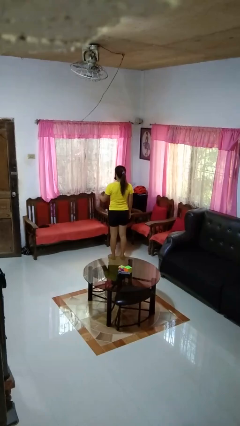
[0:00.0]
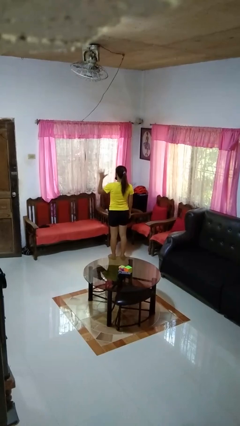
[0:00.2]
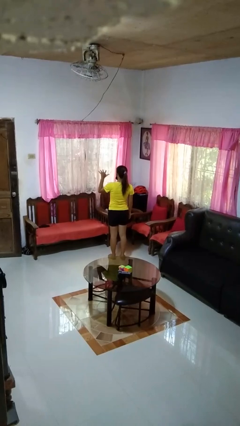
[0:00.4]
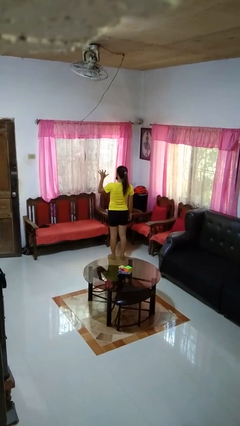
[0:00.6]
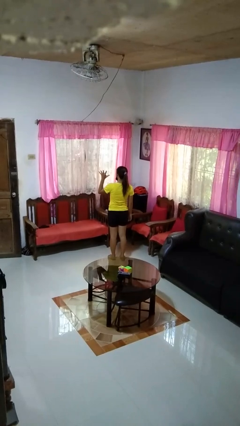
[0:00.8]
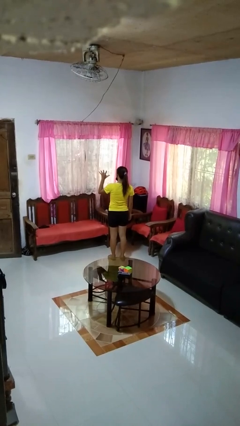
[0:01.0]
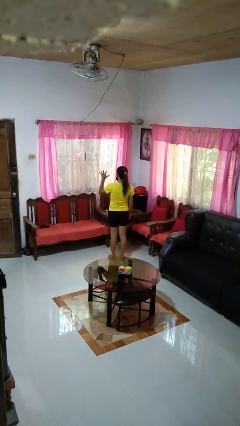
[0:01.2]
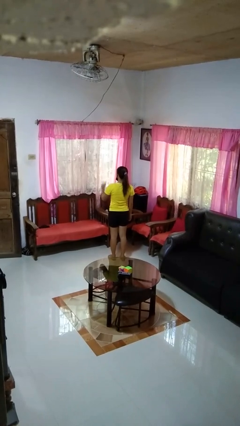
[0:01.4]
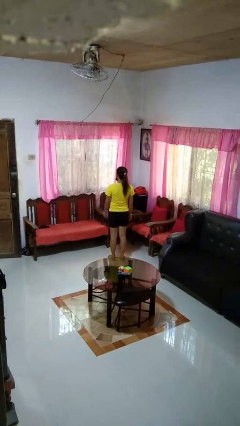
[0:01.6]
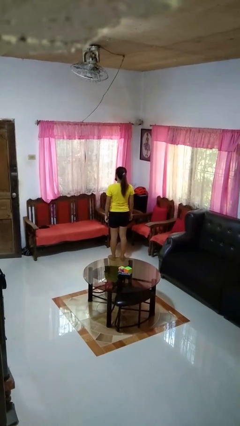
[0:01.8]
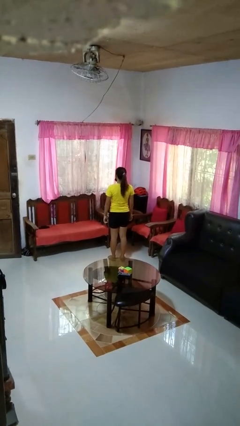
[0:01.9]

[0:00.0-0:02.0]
person gestures number five

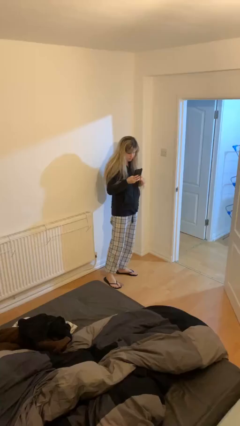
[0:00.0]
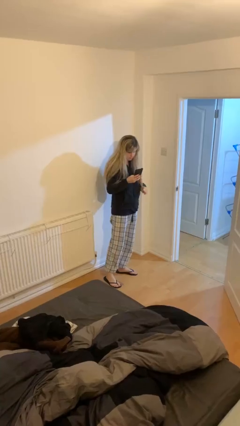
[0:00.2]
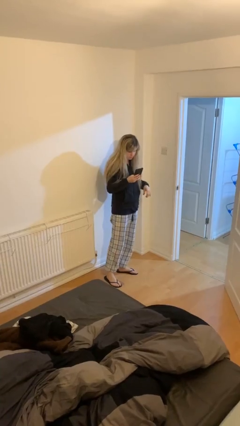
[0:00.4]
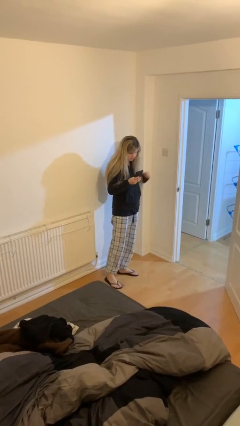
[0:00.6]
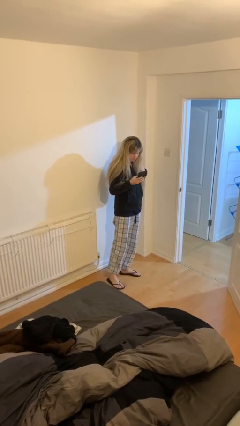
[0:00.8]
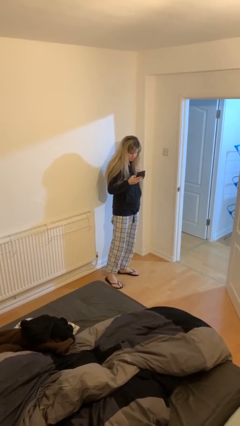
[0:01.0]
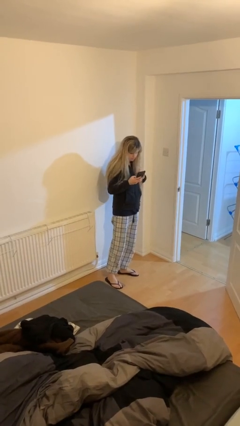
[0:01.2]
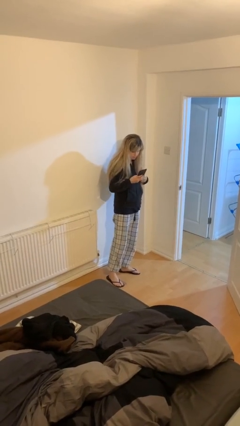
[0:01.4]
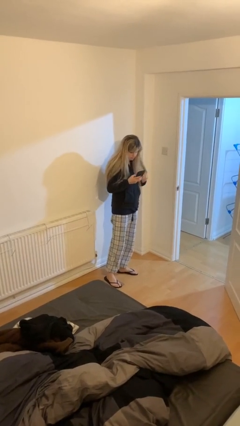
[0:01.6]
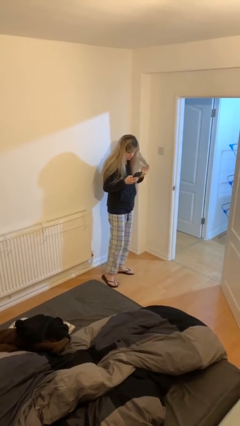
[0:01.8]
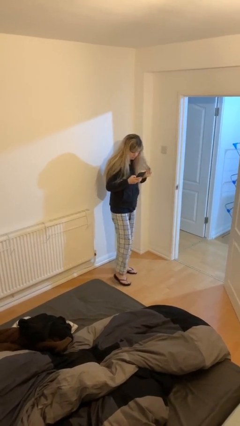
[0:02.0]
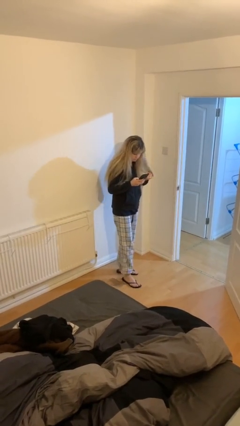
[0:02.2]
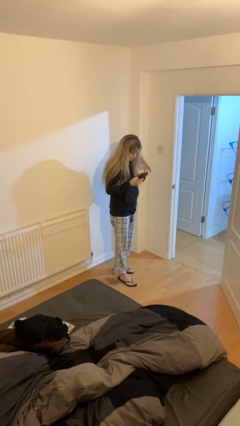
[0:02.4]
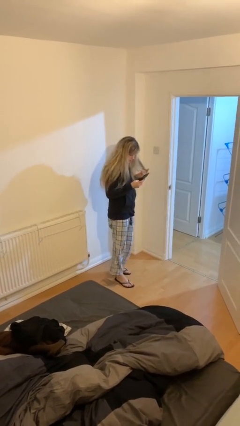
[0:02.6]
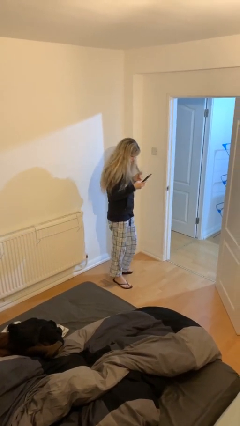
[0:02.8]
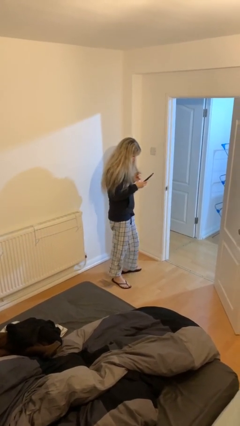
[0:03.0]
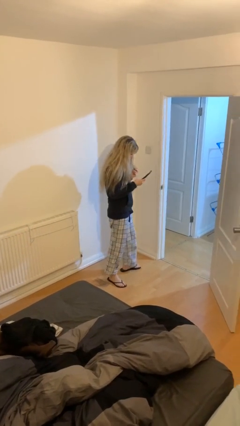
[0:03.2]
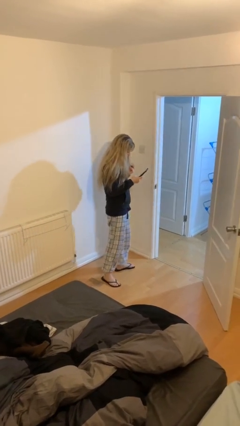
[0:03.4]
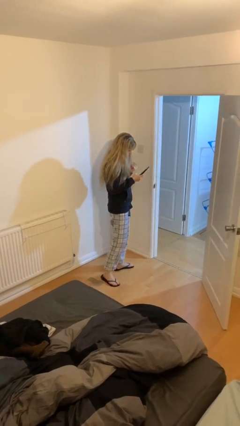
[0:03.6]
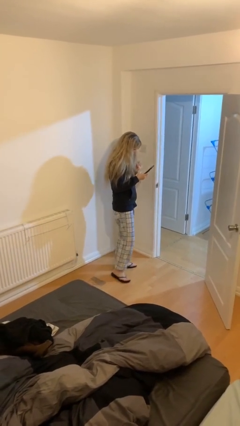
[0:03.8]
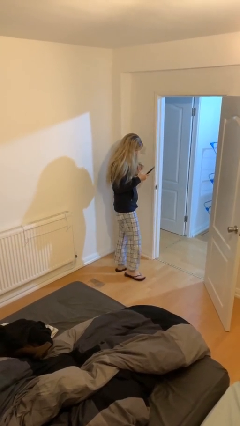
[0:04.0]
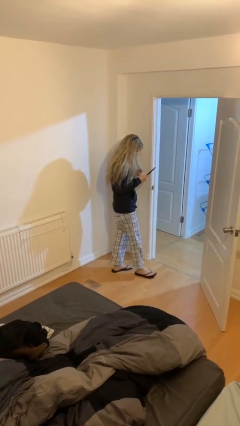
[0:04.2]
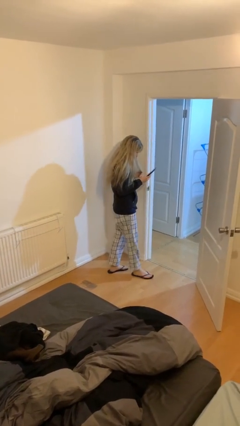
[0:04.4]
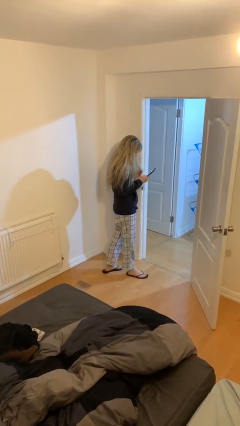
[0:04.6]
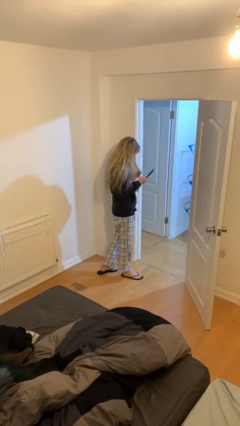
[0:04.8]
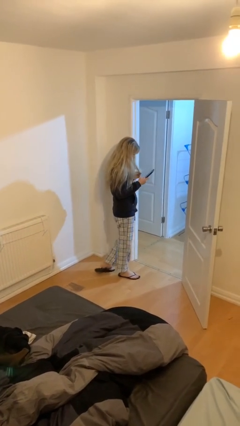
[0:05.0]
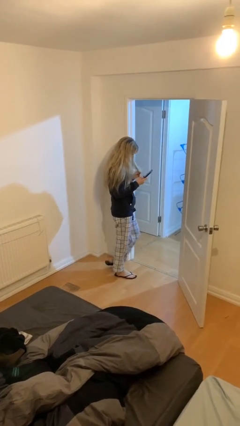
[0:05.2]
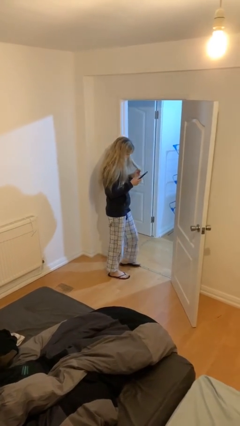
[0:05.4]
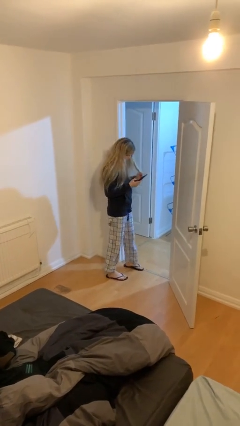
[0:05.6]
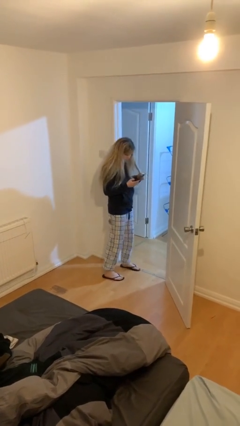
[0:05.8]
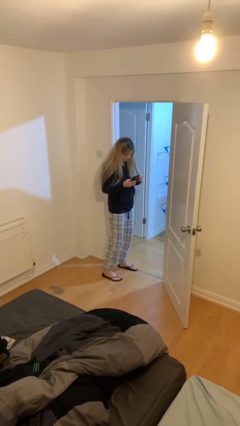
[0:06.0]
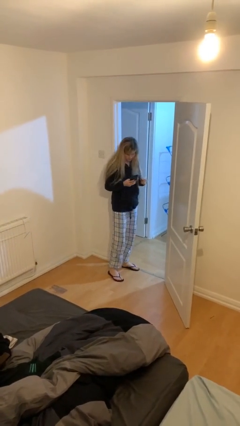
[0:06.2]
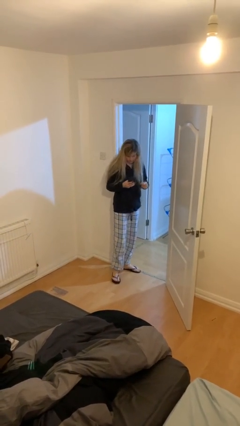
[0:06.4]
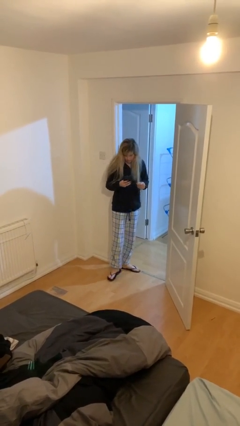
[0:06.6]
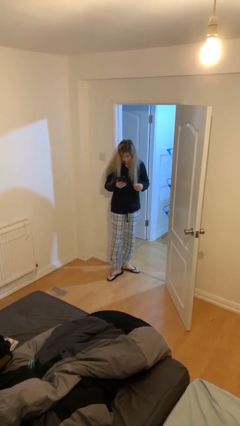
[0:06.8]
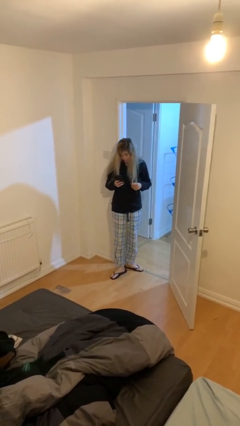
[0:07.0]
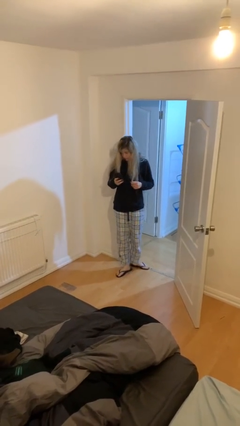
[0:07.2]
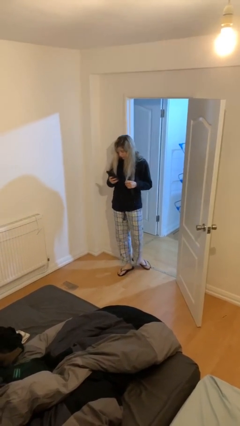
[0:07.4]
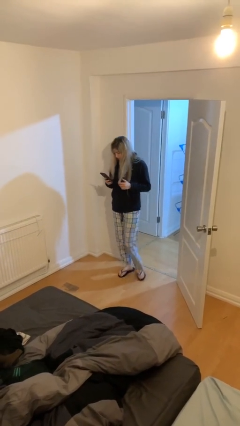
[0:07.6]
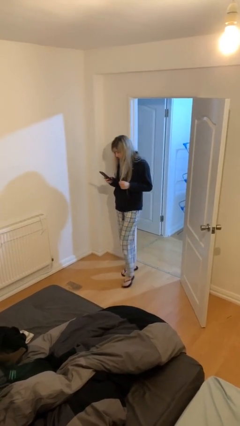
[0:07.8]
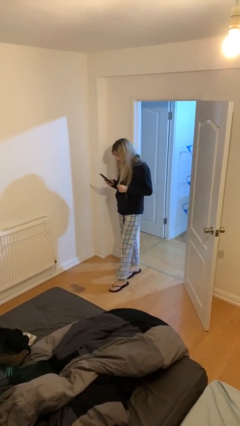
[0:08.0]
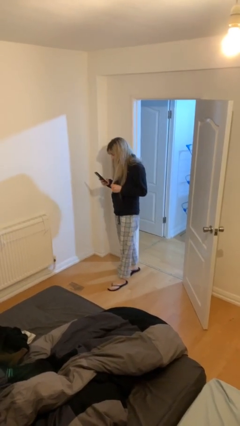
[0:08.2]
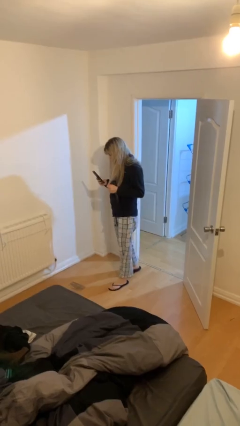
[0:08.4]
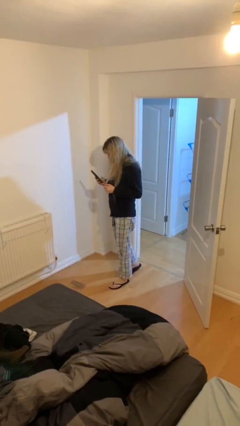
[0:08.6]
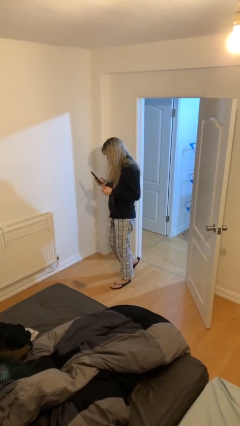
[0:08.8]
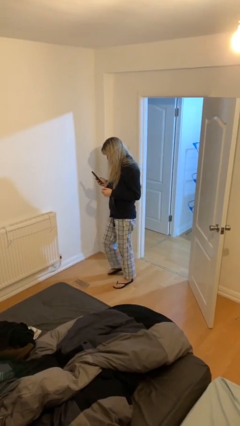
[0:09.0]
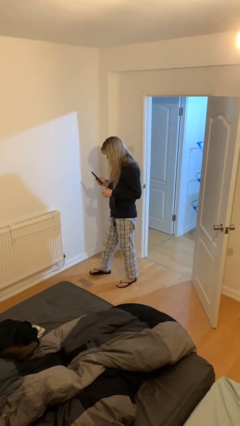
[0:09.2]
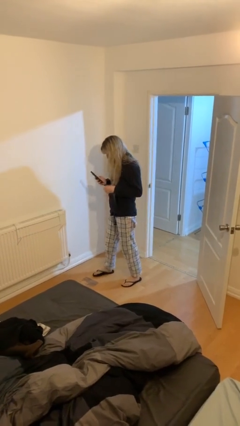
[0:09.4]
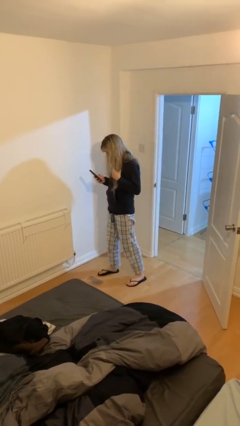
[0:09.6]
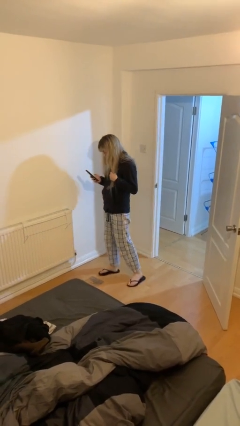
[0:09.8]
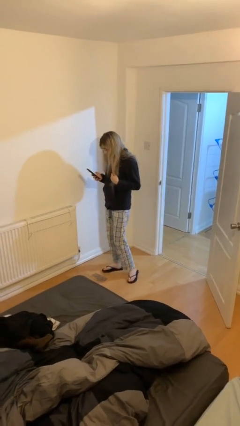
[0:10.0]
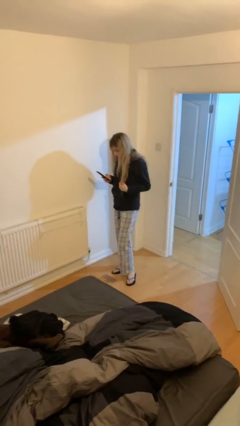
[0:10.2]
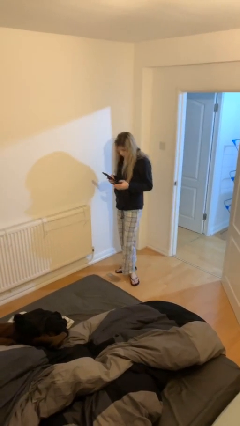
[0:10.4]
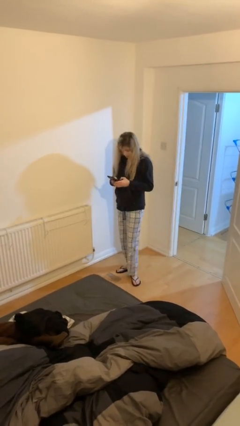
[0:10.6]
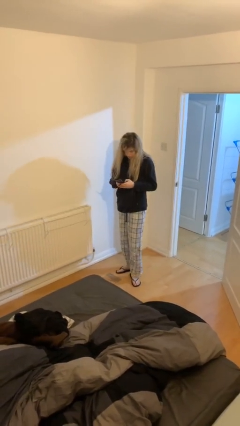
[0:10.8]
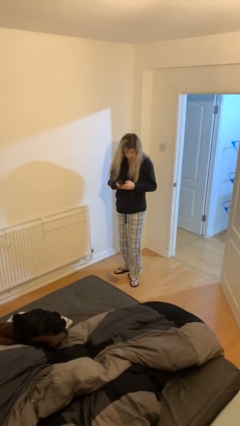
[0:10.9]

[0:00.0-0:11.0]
person texts on phone

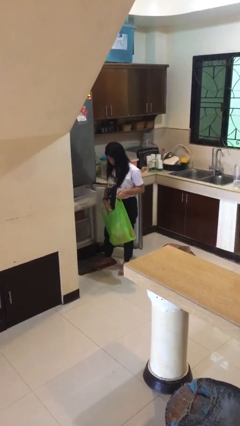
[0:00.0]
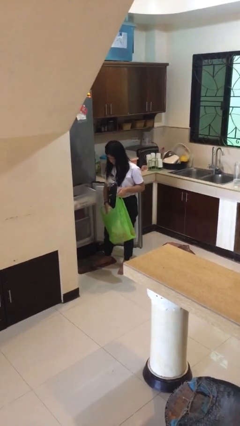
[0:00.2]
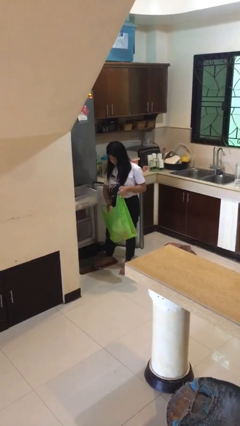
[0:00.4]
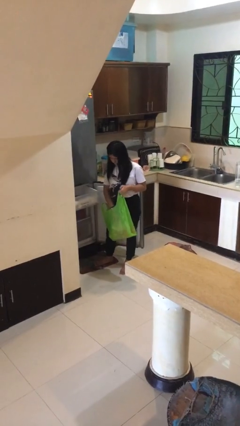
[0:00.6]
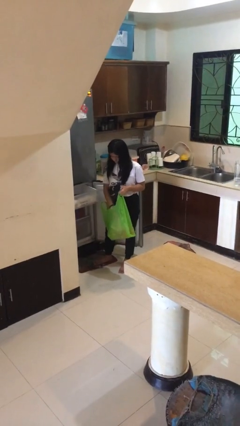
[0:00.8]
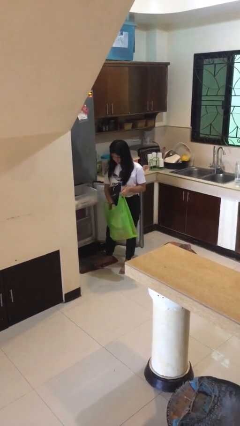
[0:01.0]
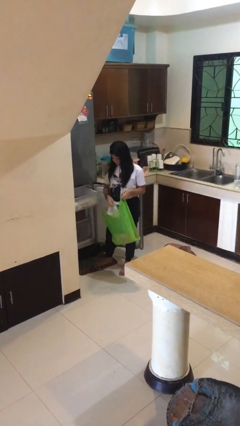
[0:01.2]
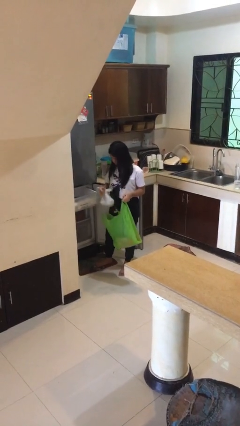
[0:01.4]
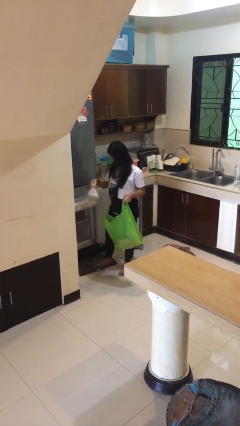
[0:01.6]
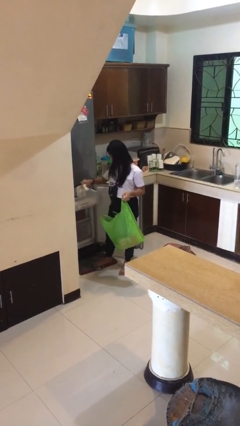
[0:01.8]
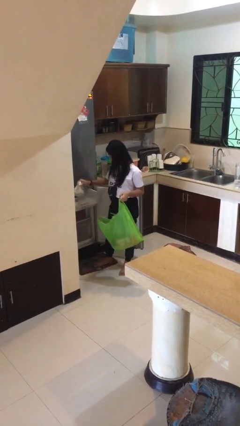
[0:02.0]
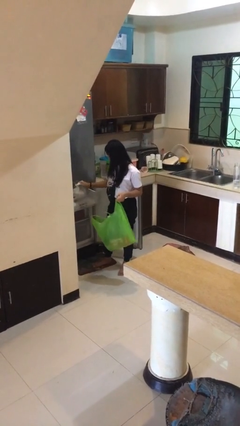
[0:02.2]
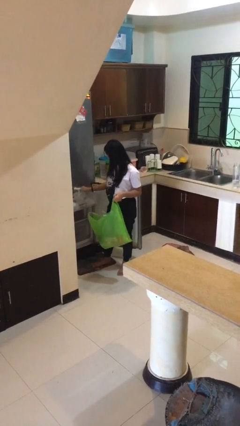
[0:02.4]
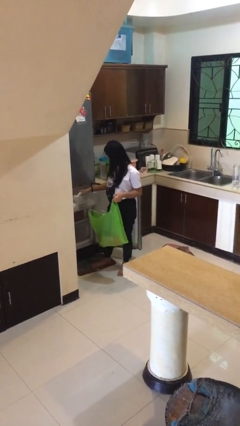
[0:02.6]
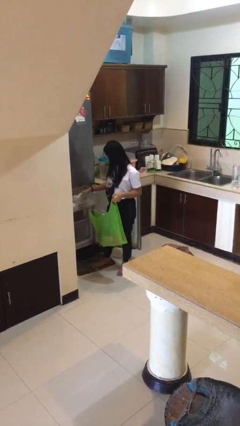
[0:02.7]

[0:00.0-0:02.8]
person loads groceries into refrigerator

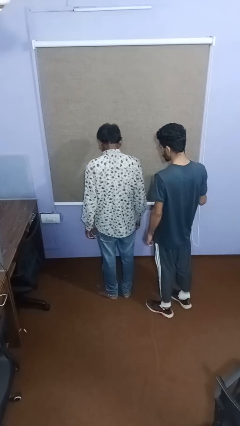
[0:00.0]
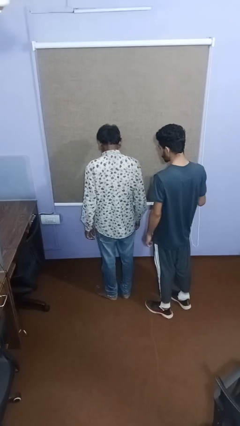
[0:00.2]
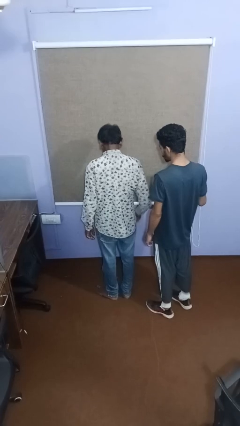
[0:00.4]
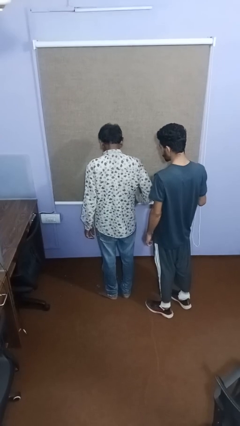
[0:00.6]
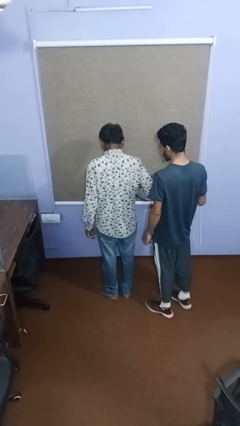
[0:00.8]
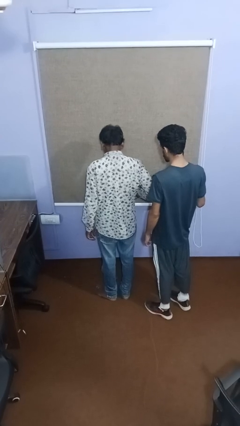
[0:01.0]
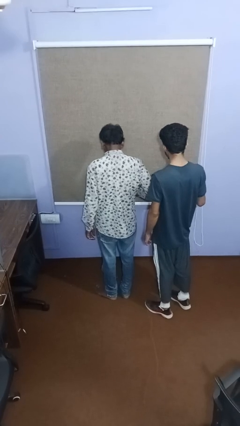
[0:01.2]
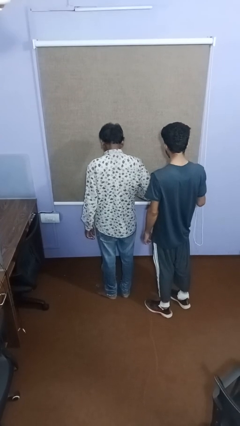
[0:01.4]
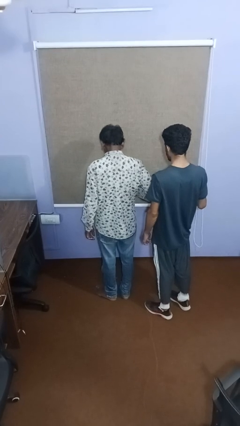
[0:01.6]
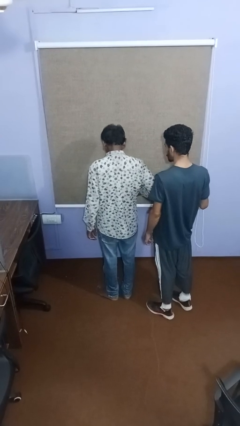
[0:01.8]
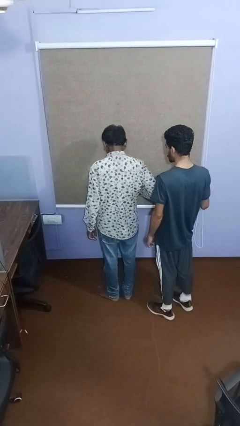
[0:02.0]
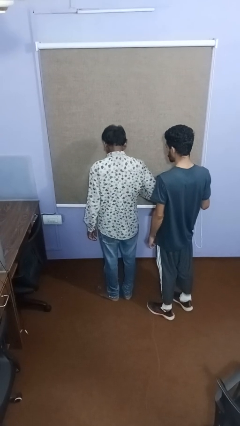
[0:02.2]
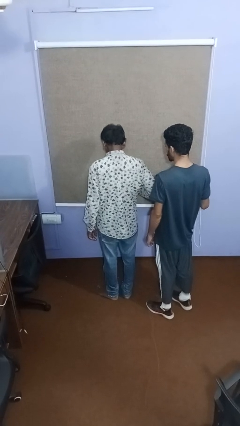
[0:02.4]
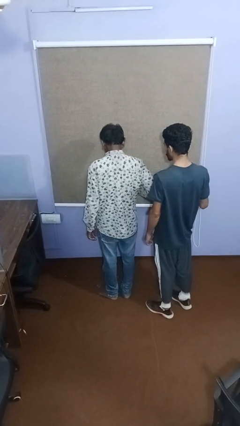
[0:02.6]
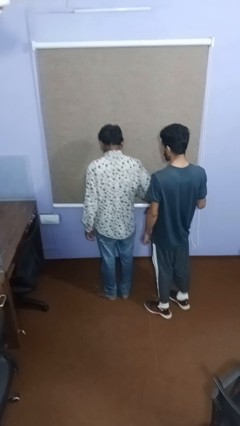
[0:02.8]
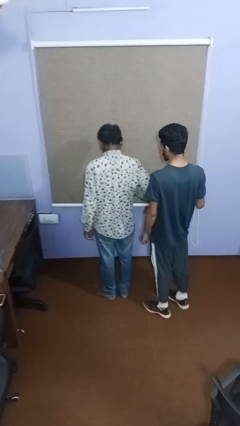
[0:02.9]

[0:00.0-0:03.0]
person nudges person with elbow
